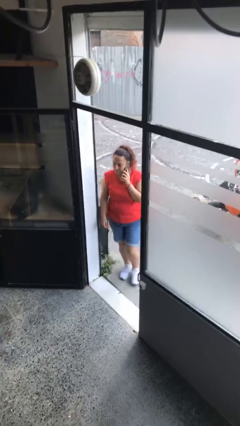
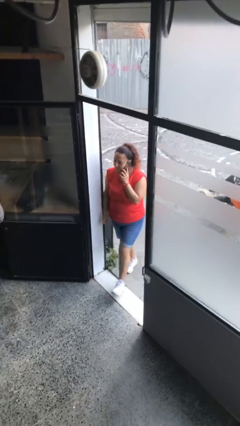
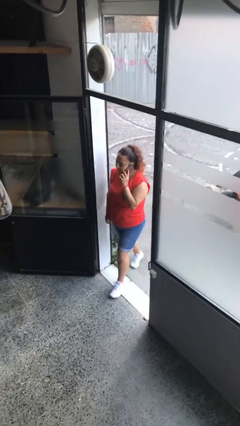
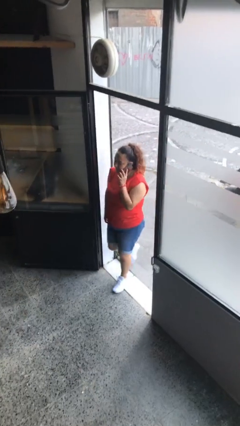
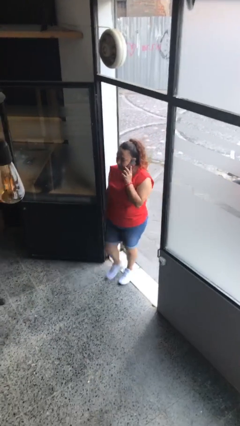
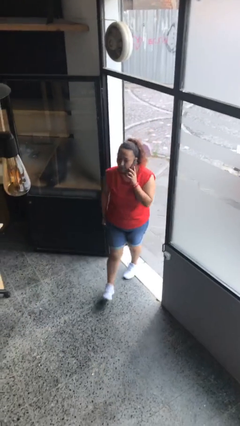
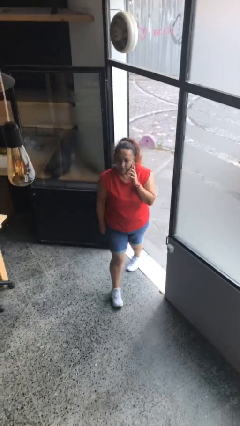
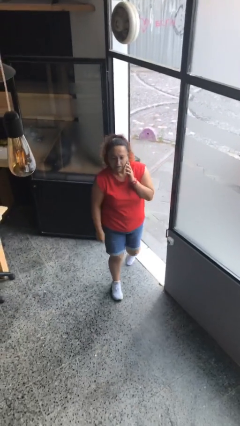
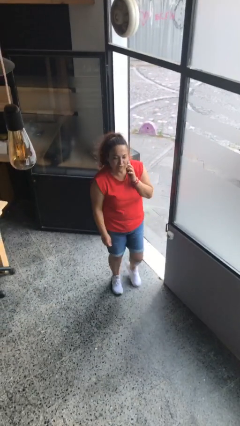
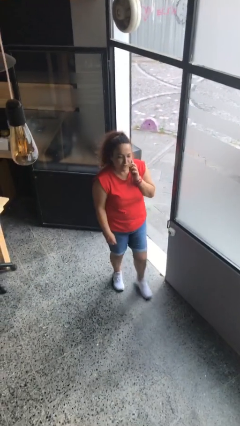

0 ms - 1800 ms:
person enters scene through structure

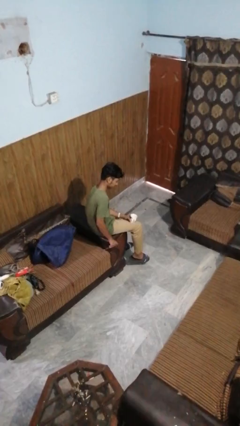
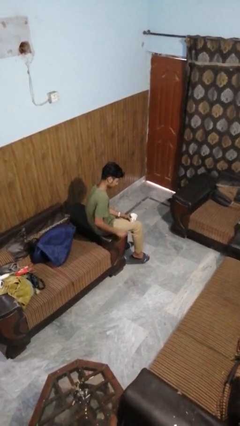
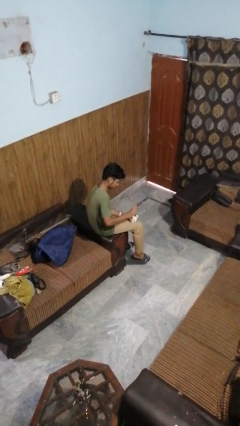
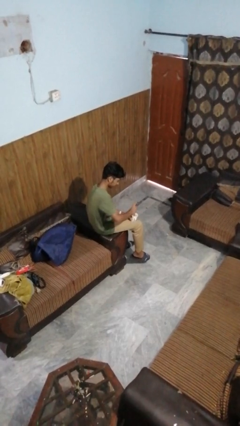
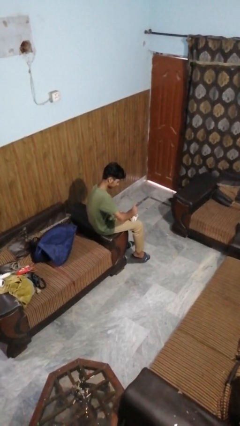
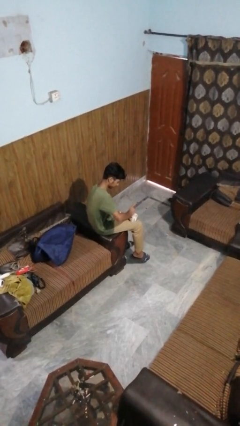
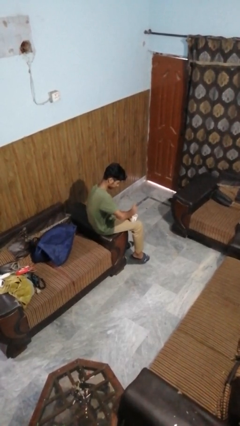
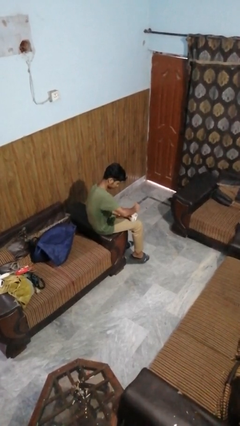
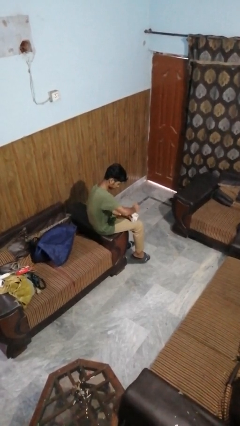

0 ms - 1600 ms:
person stirs mug

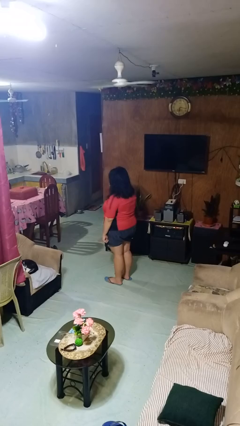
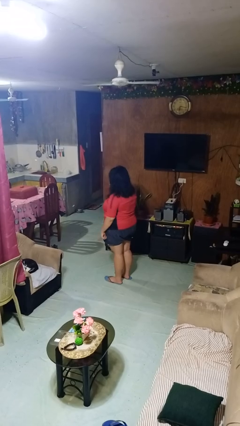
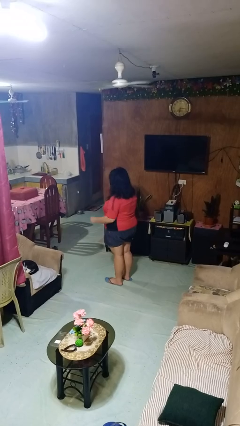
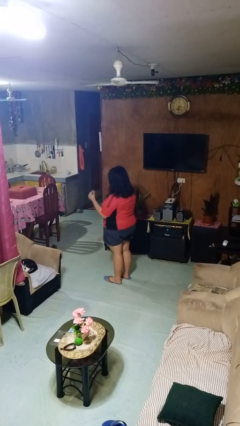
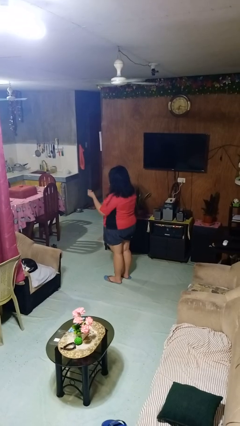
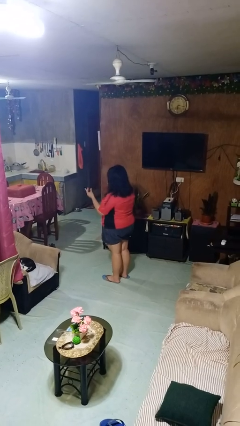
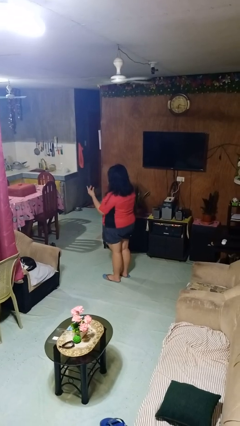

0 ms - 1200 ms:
person snaps fingers

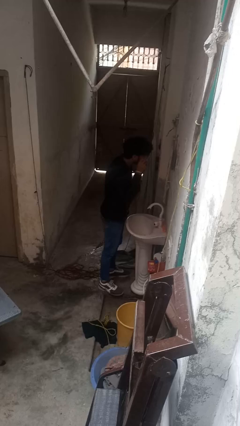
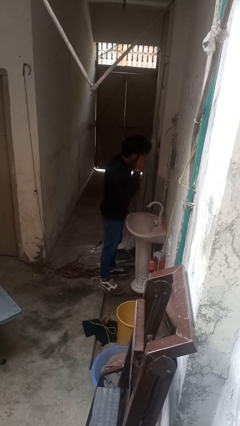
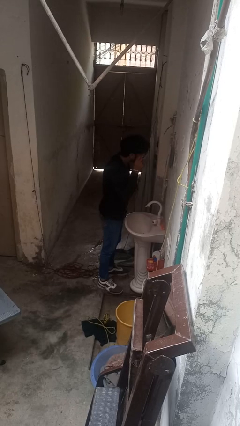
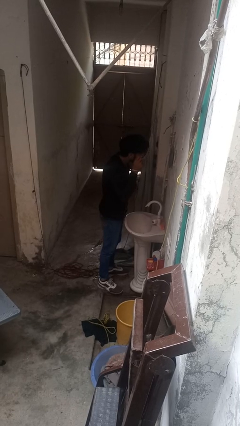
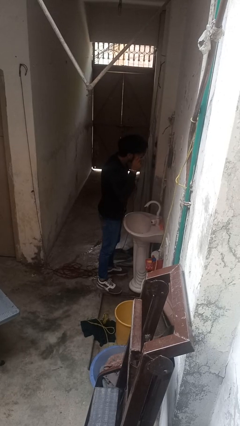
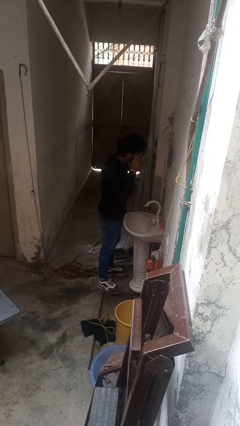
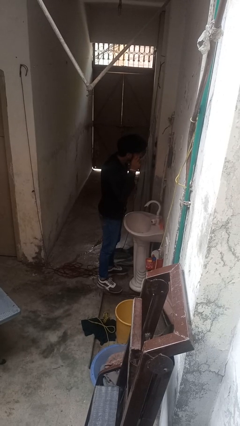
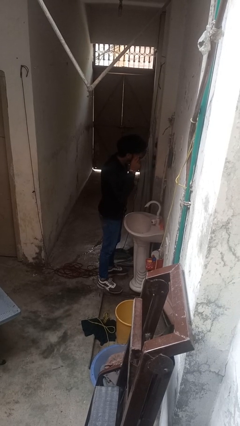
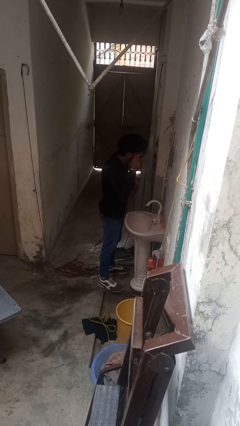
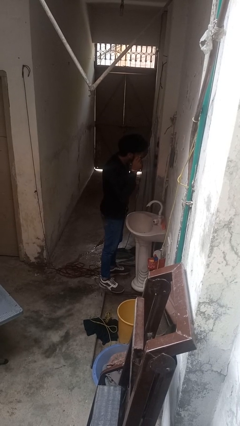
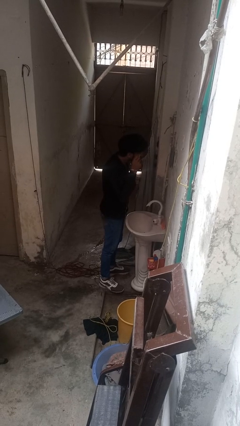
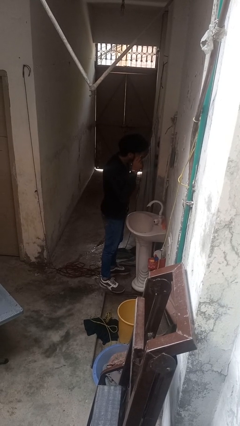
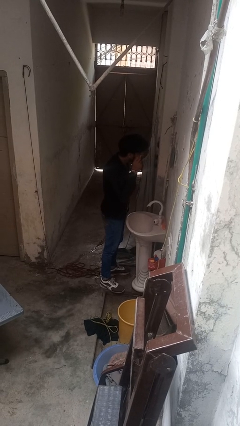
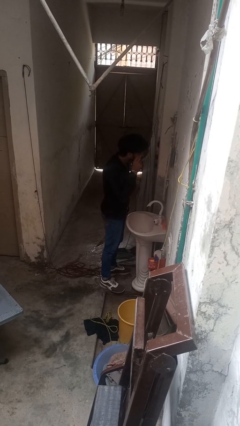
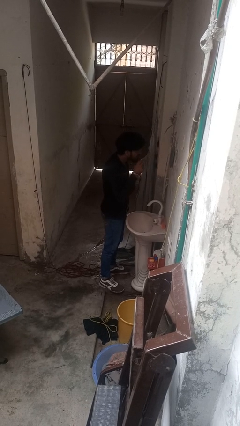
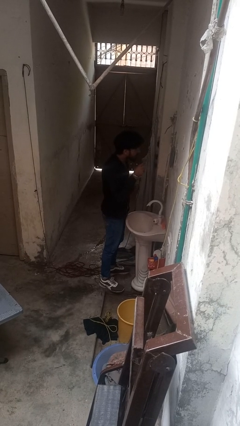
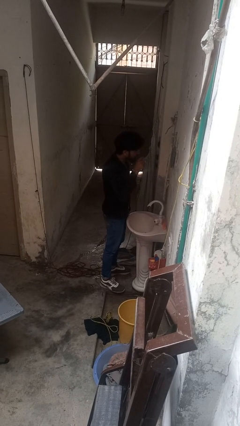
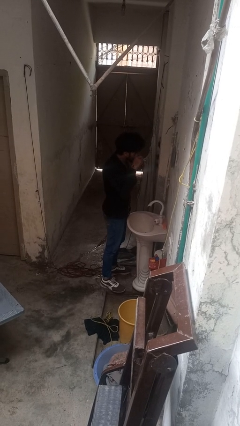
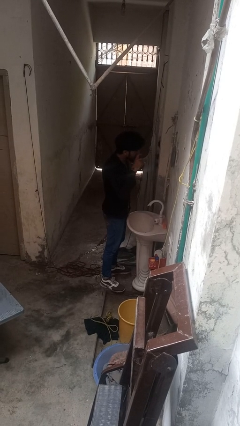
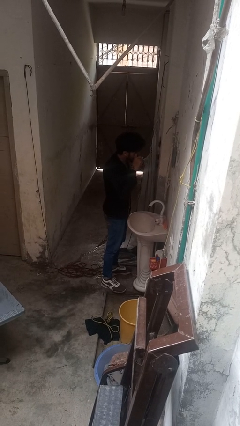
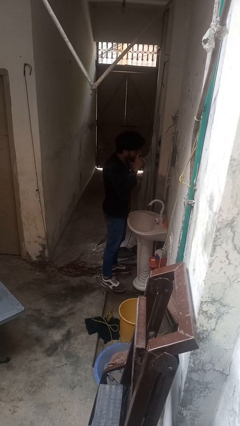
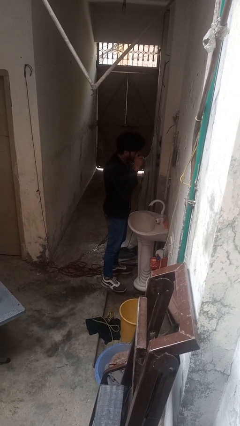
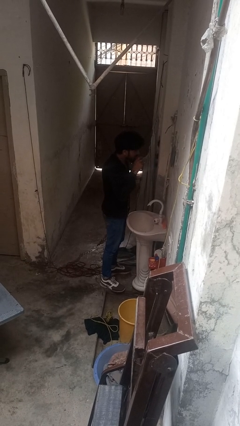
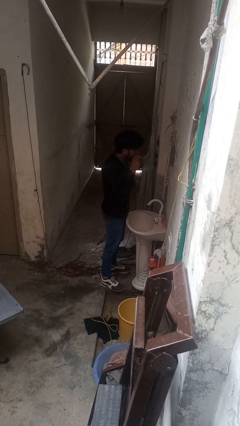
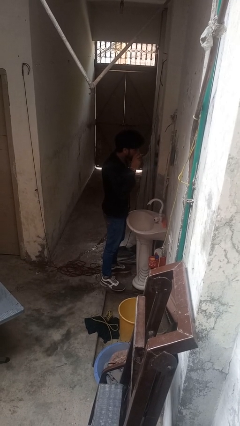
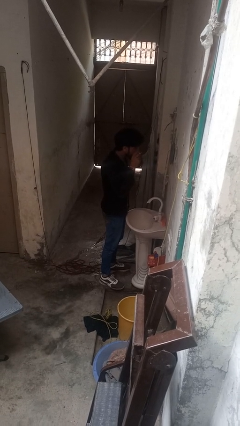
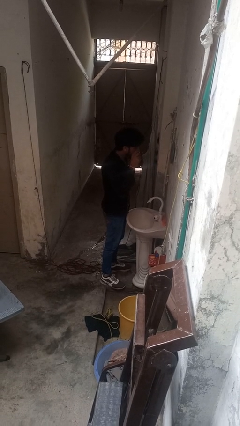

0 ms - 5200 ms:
person applies eye makeup

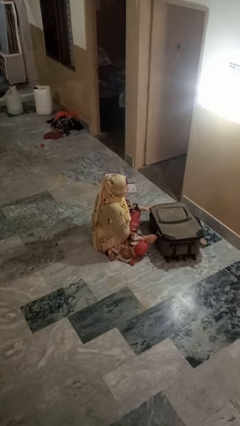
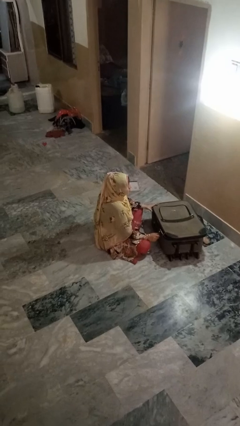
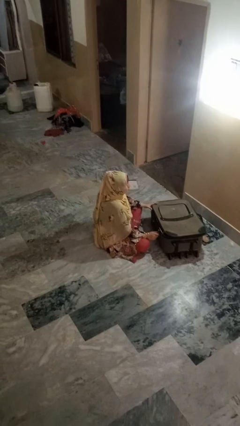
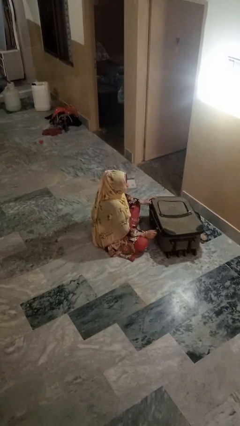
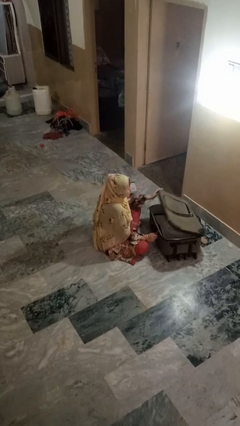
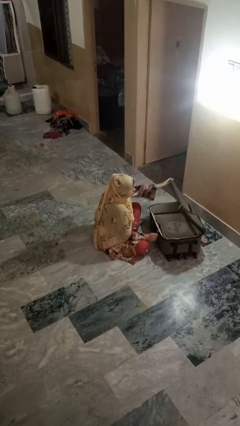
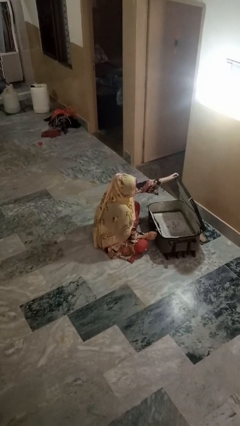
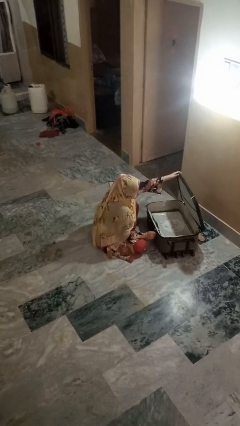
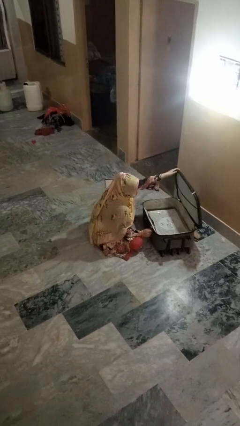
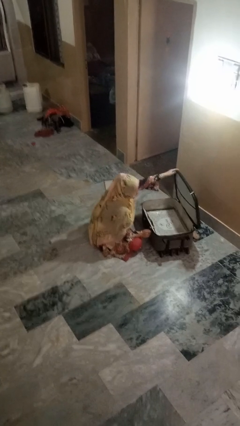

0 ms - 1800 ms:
person opens suitcase

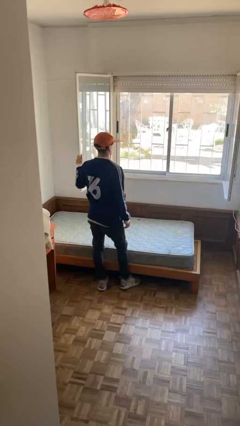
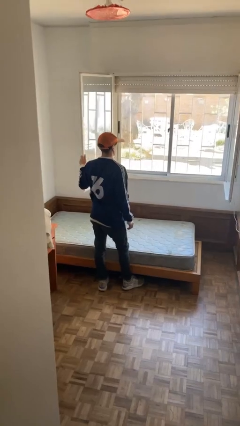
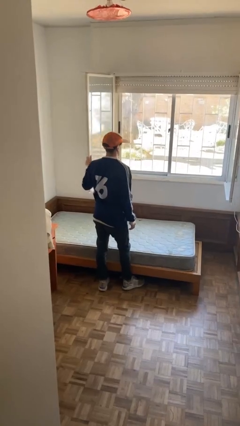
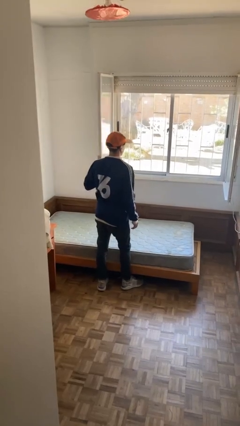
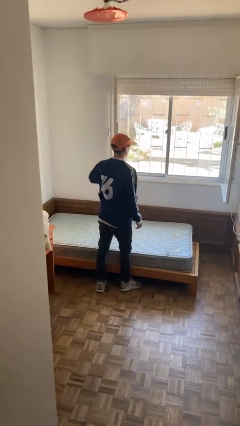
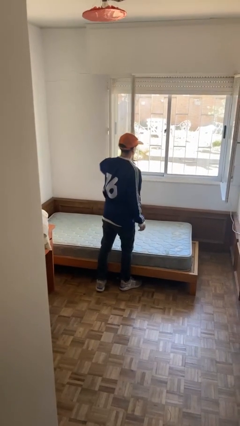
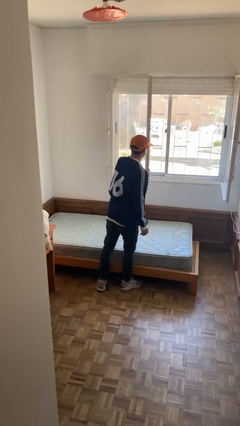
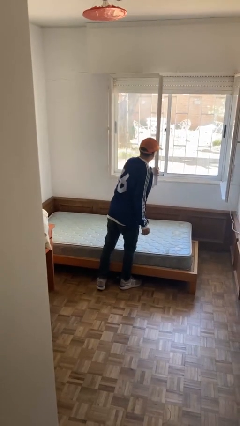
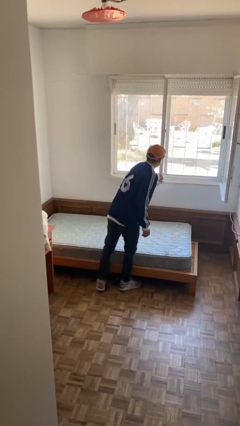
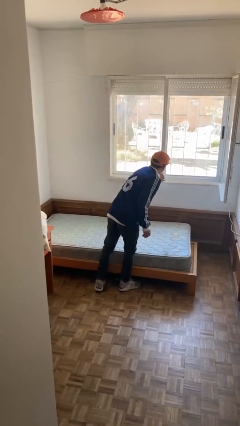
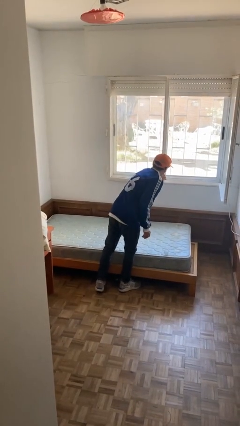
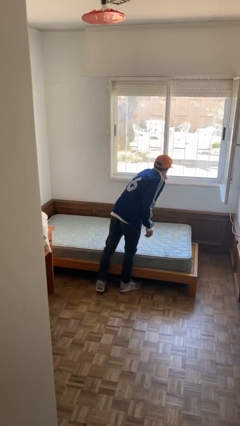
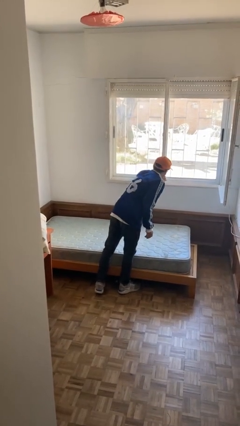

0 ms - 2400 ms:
person closes home window

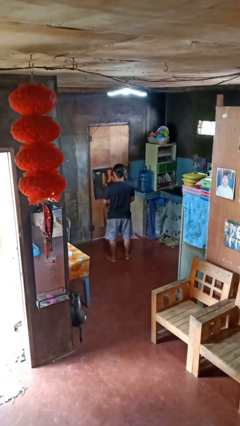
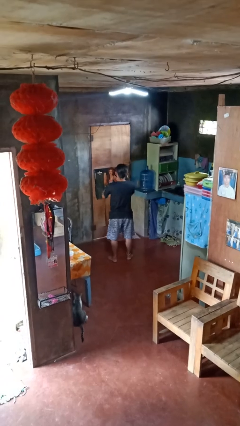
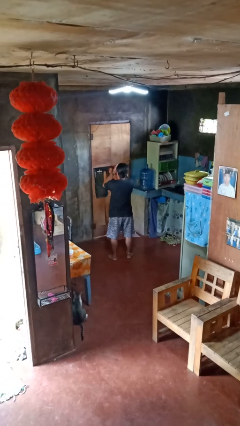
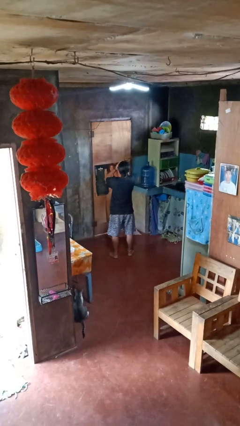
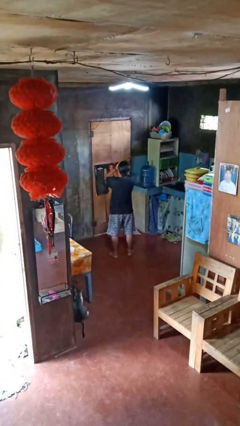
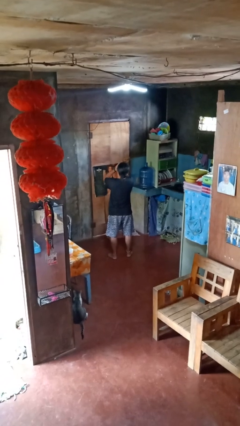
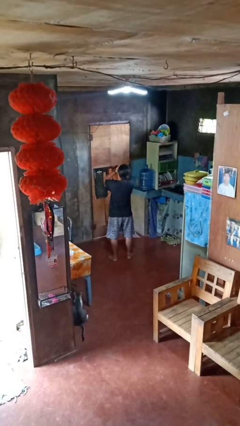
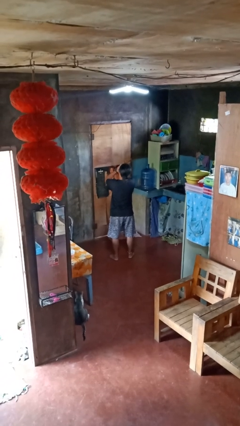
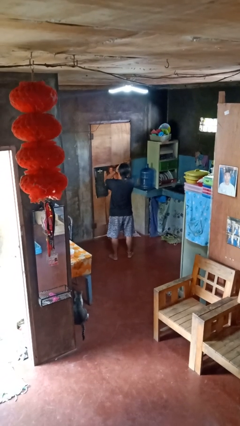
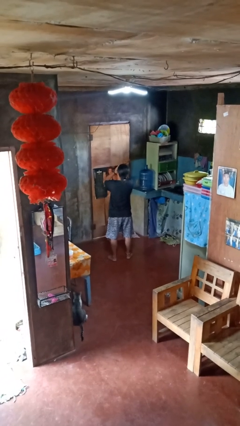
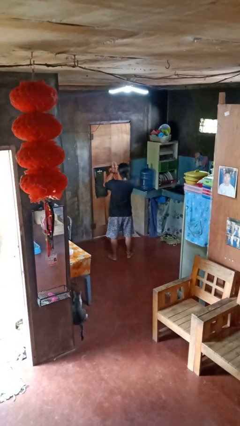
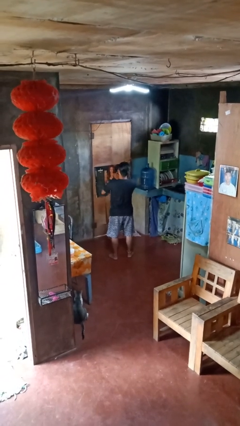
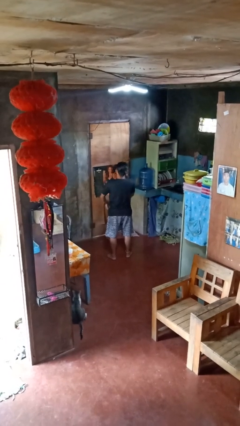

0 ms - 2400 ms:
person yawns

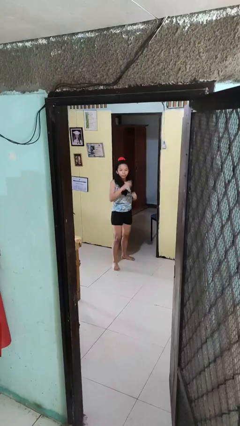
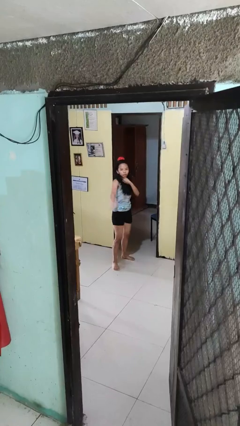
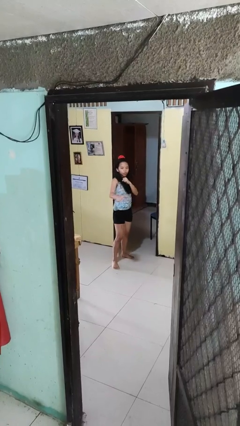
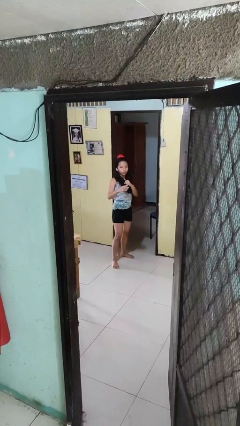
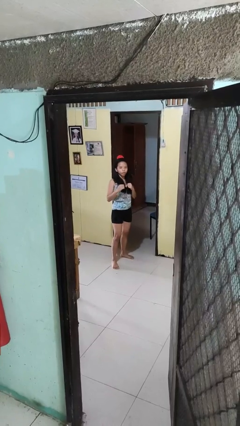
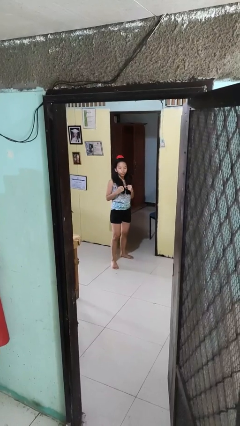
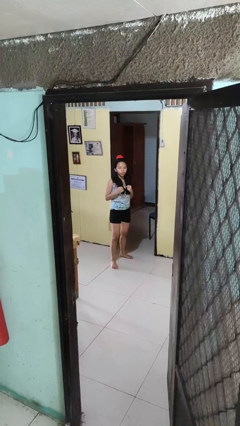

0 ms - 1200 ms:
person karate chop
